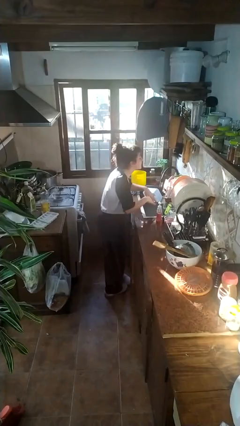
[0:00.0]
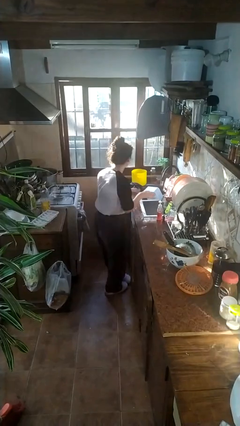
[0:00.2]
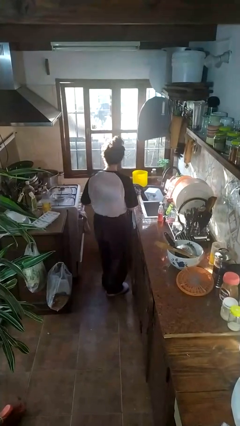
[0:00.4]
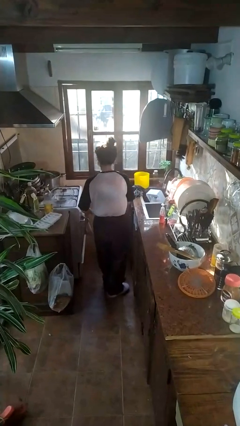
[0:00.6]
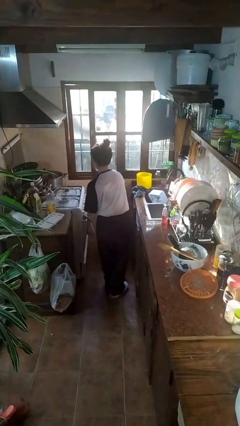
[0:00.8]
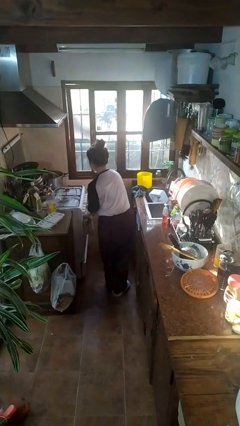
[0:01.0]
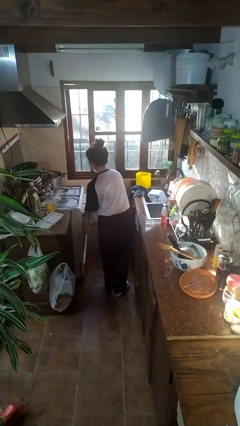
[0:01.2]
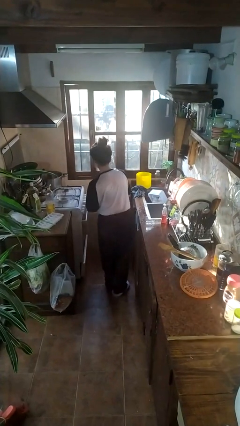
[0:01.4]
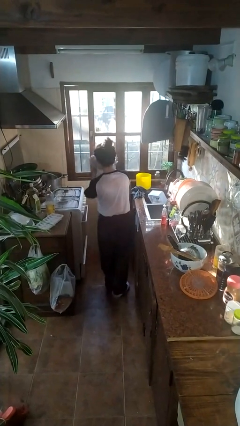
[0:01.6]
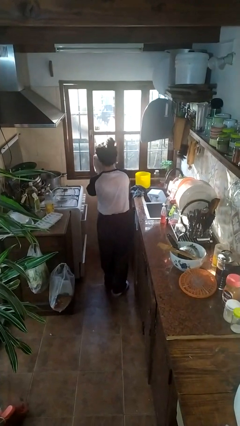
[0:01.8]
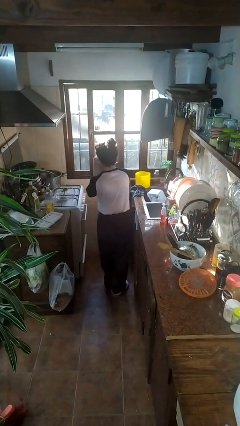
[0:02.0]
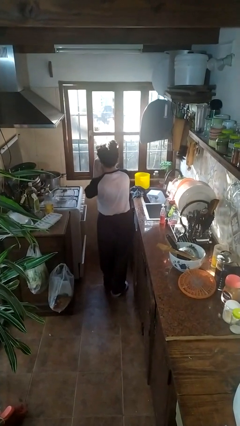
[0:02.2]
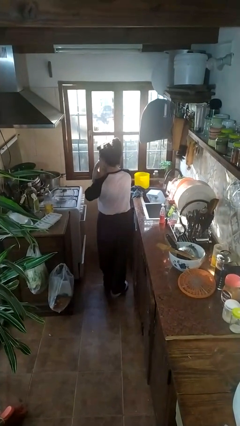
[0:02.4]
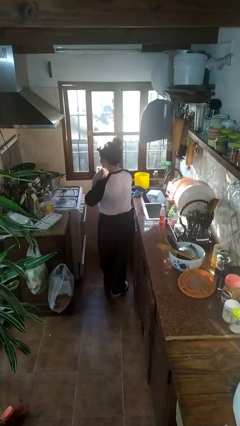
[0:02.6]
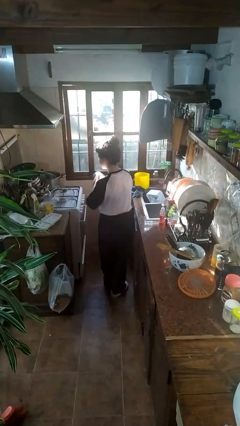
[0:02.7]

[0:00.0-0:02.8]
person dries face with towel

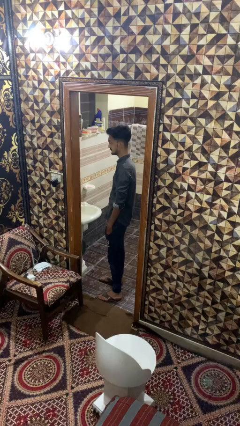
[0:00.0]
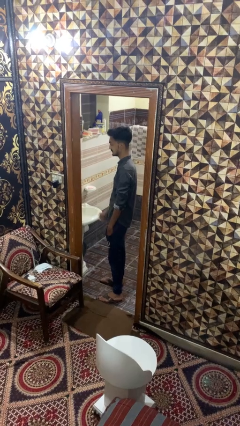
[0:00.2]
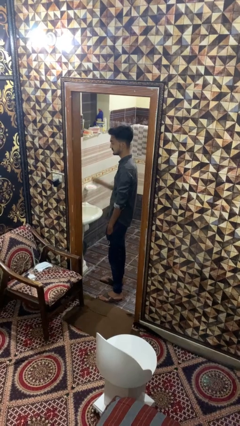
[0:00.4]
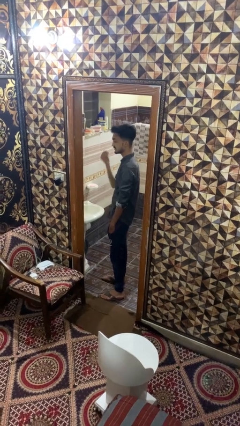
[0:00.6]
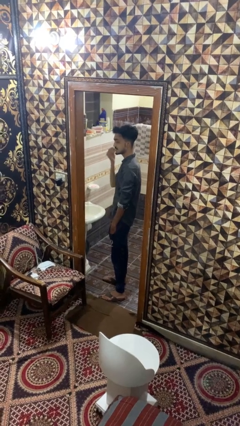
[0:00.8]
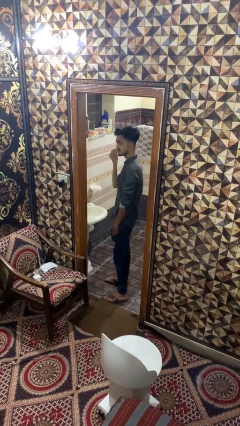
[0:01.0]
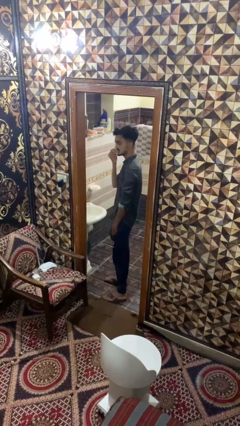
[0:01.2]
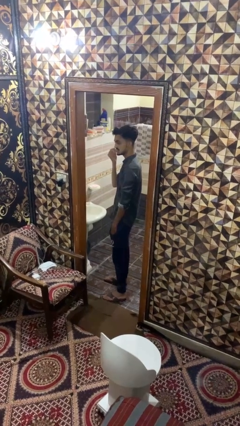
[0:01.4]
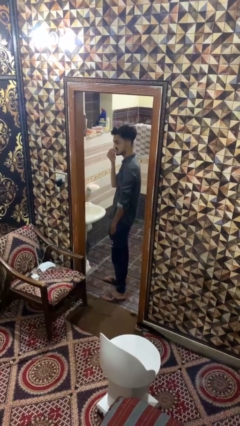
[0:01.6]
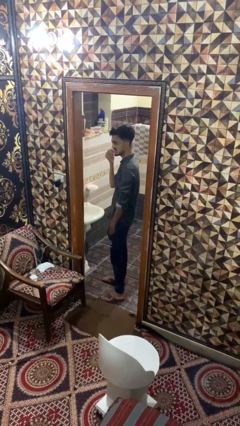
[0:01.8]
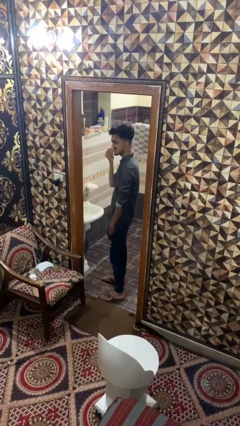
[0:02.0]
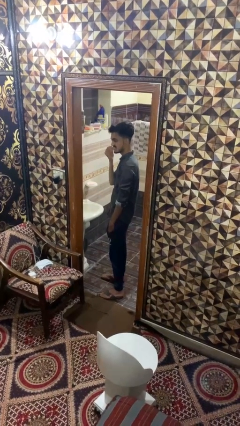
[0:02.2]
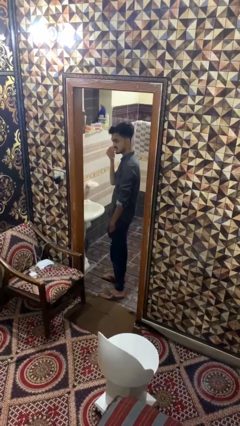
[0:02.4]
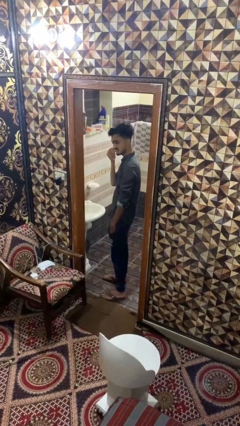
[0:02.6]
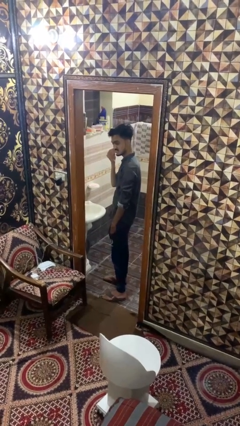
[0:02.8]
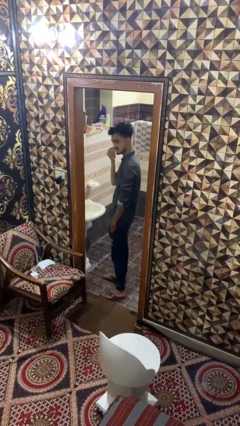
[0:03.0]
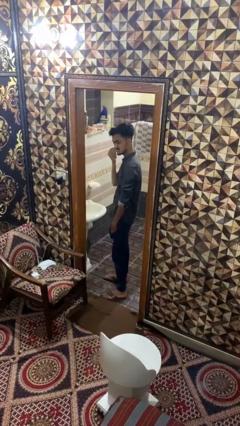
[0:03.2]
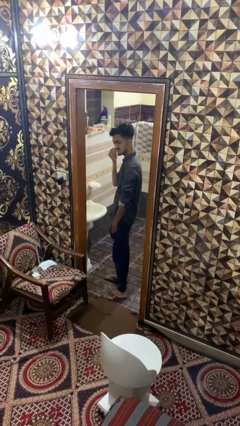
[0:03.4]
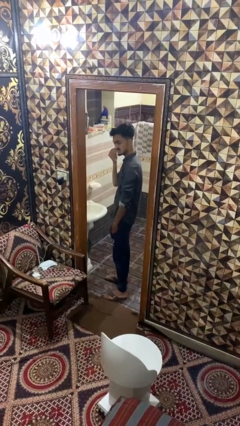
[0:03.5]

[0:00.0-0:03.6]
person flosses

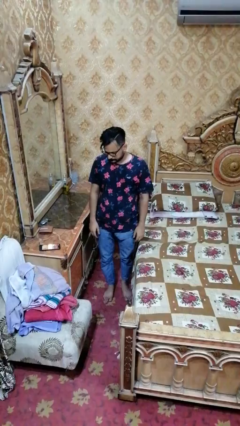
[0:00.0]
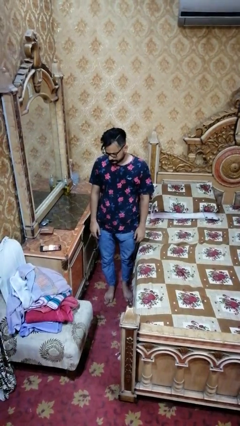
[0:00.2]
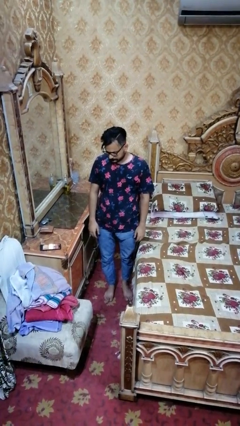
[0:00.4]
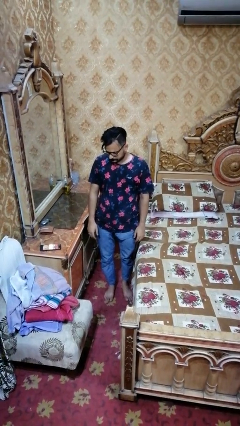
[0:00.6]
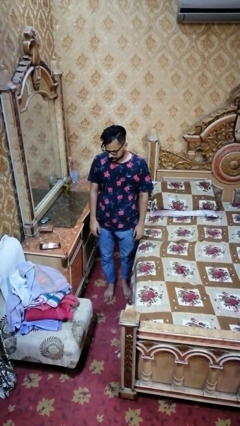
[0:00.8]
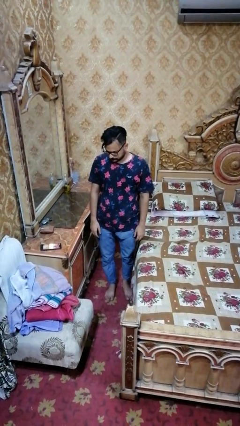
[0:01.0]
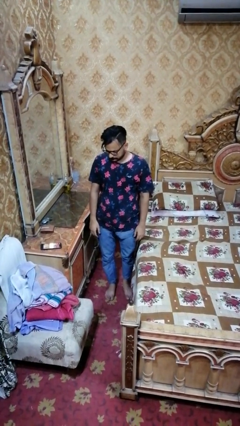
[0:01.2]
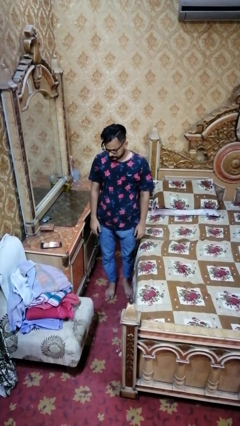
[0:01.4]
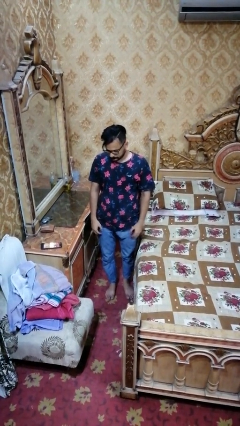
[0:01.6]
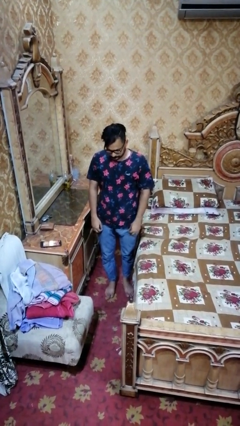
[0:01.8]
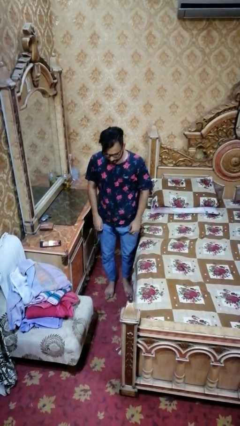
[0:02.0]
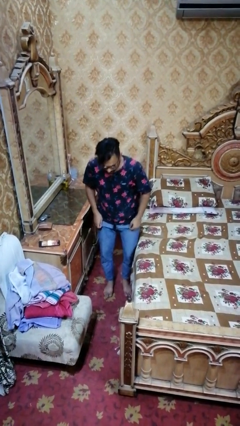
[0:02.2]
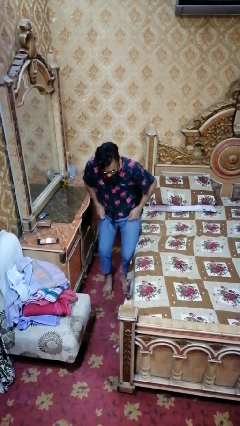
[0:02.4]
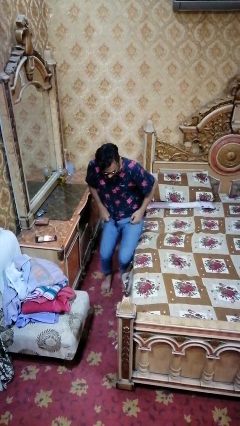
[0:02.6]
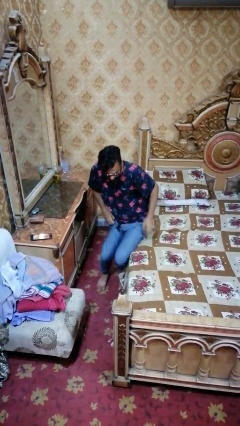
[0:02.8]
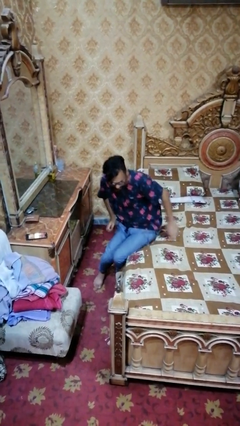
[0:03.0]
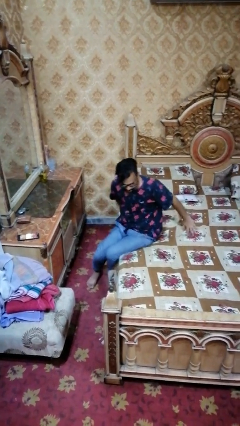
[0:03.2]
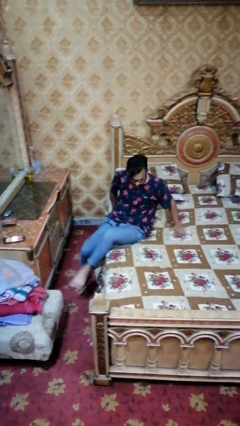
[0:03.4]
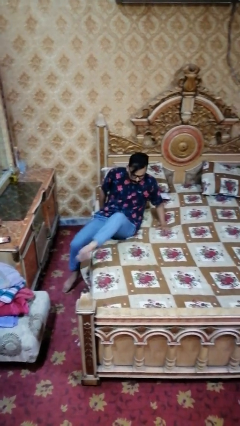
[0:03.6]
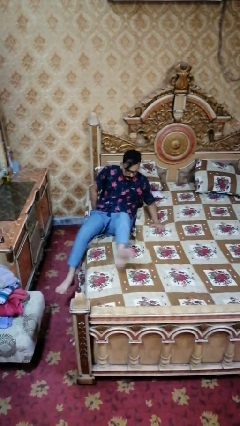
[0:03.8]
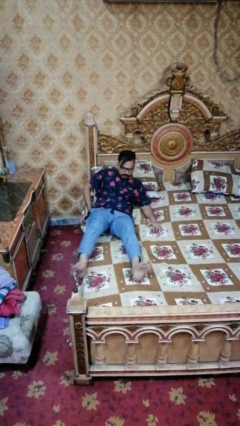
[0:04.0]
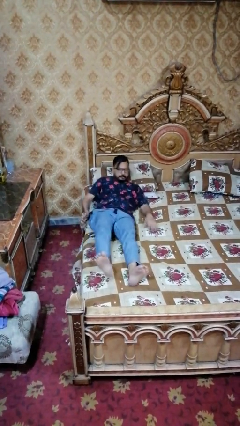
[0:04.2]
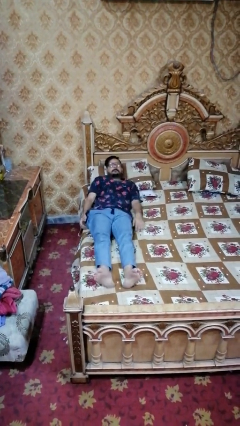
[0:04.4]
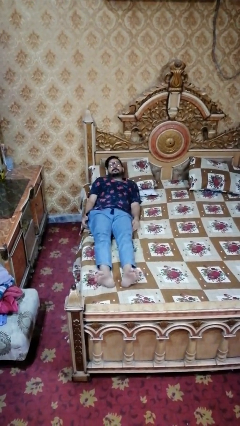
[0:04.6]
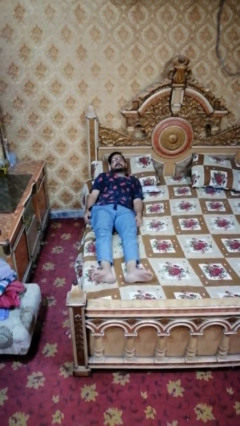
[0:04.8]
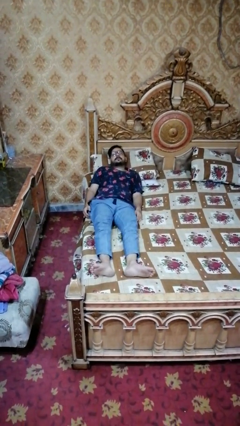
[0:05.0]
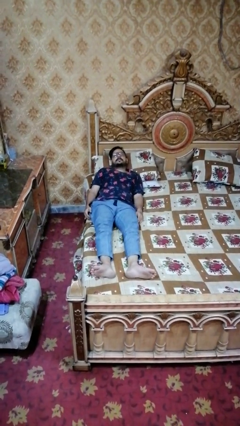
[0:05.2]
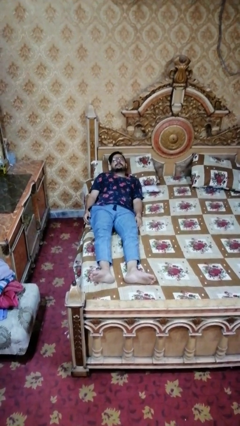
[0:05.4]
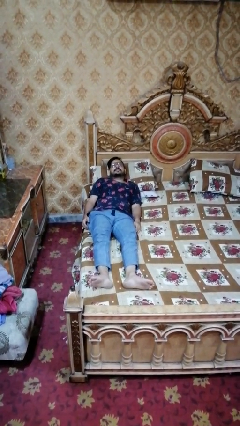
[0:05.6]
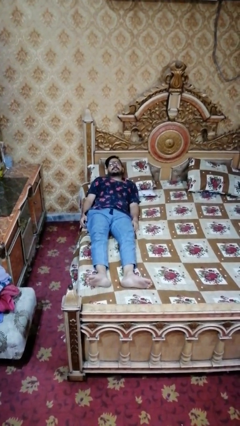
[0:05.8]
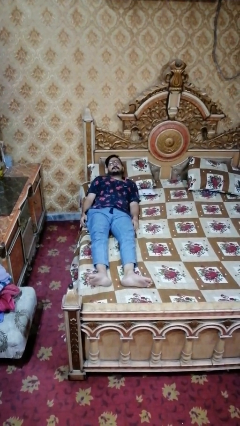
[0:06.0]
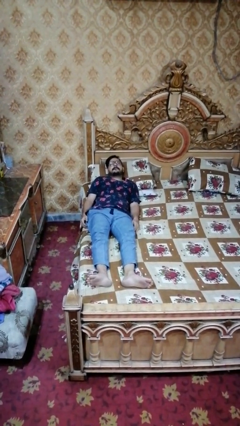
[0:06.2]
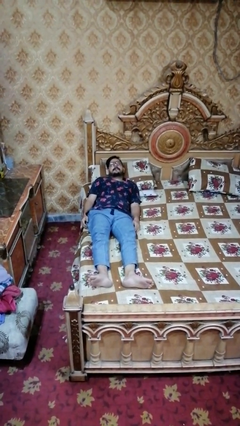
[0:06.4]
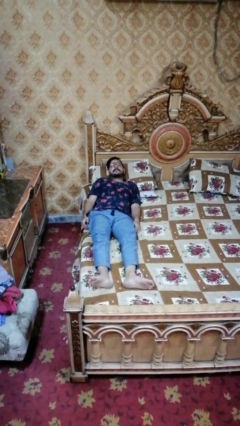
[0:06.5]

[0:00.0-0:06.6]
person lies down on bed

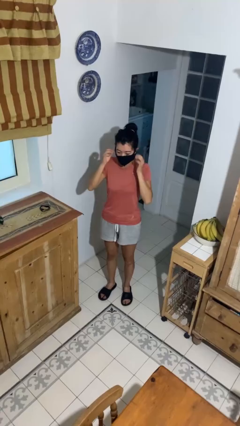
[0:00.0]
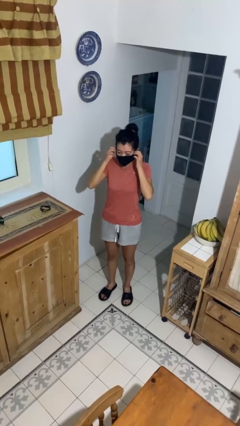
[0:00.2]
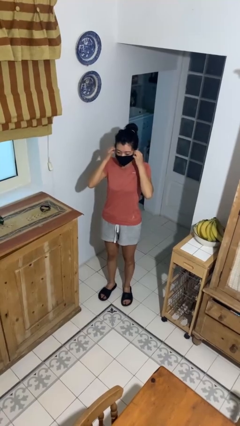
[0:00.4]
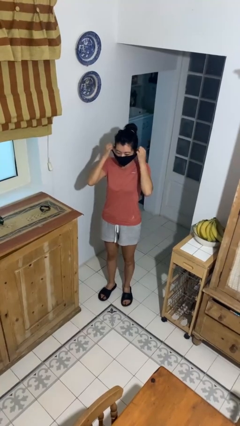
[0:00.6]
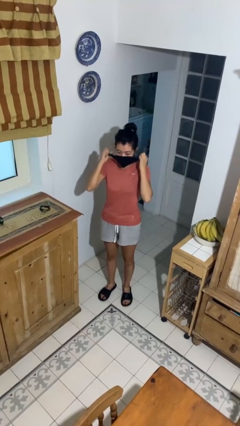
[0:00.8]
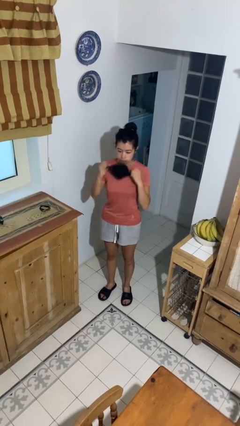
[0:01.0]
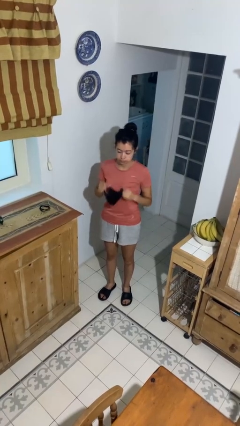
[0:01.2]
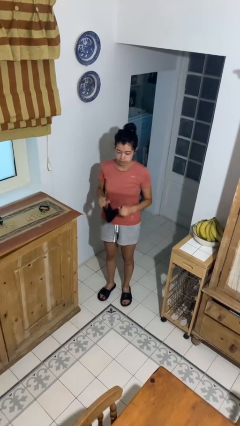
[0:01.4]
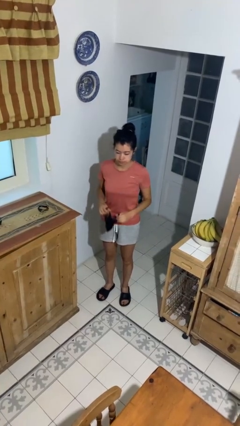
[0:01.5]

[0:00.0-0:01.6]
person takes off facemask

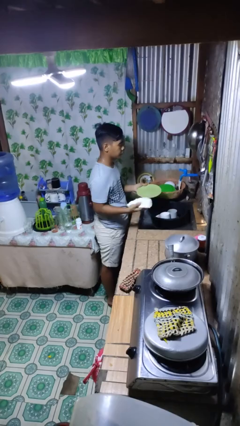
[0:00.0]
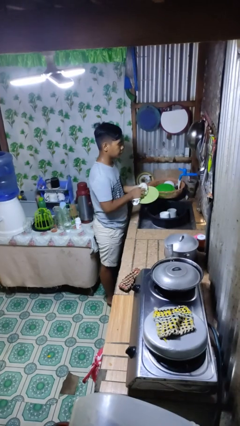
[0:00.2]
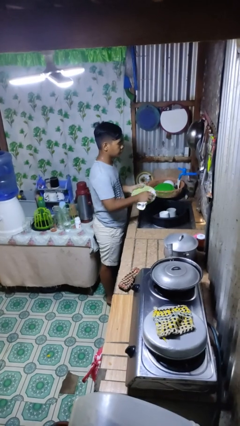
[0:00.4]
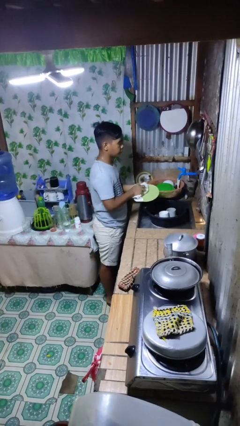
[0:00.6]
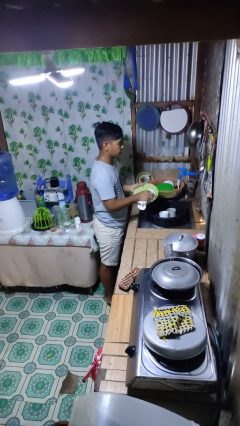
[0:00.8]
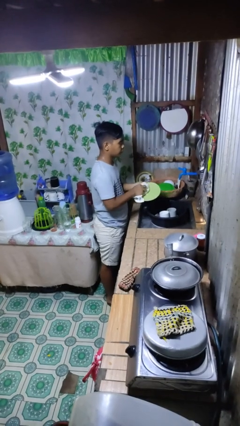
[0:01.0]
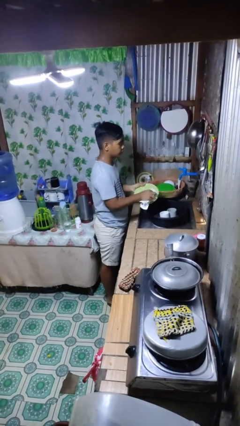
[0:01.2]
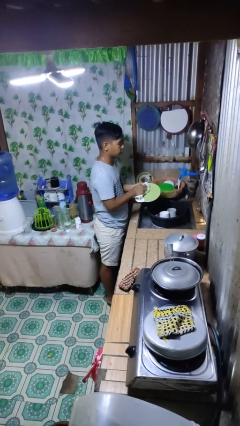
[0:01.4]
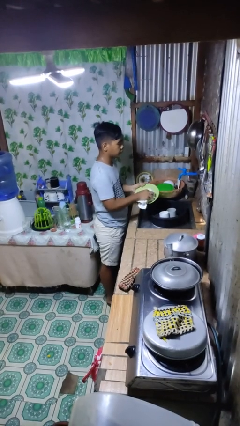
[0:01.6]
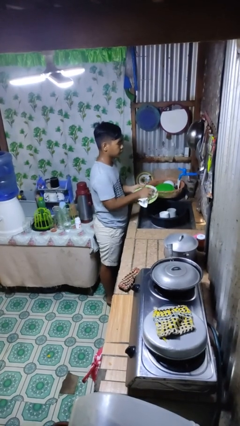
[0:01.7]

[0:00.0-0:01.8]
person dries dish

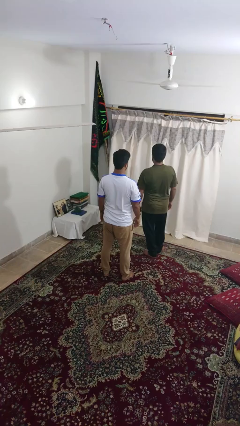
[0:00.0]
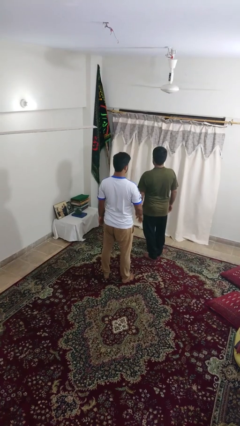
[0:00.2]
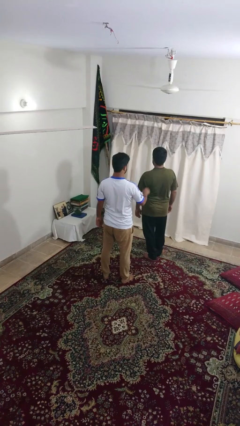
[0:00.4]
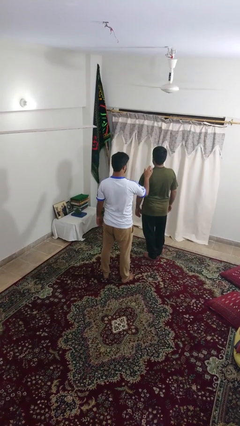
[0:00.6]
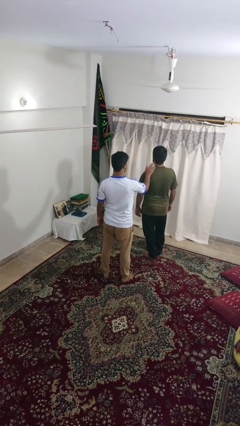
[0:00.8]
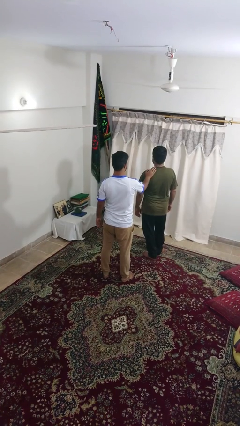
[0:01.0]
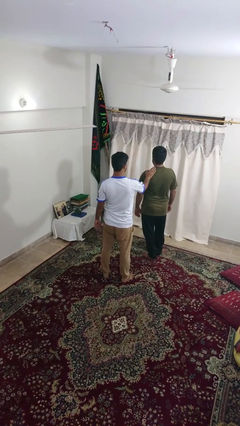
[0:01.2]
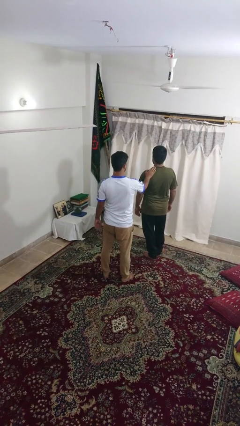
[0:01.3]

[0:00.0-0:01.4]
person touches back of person
